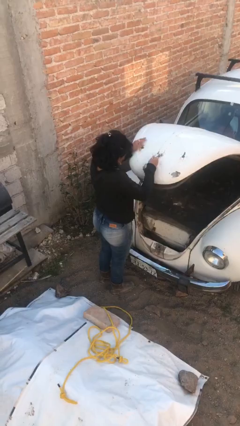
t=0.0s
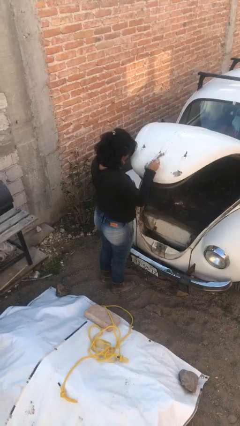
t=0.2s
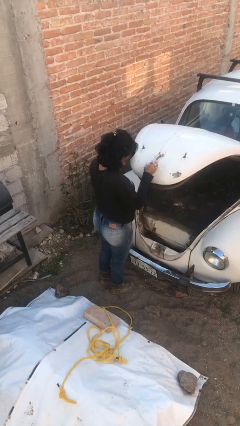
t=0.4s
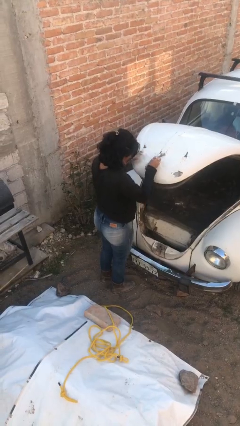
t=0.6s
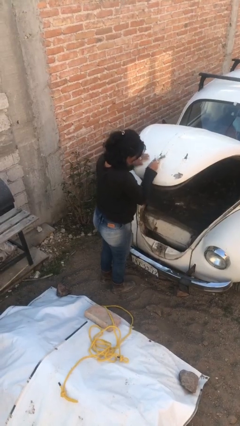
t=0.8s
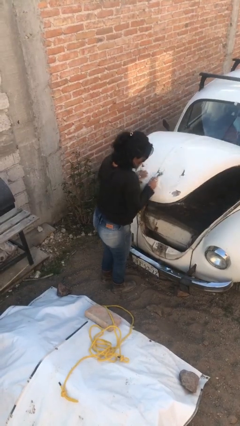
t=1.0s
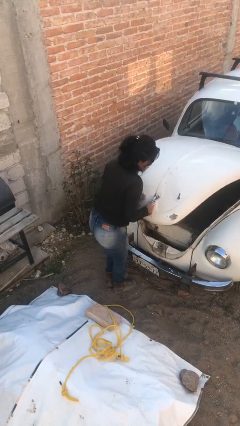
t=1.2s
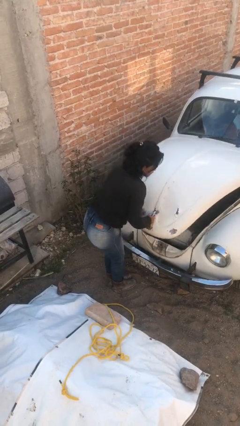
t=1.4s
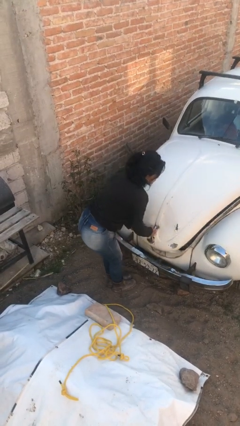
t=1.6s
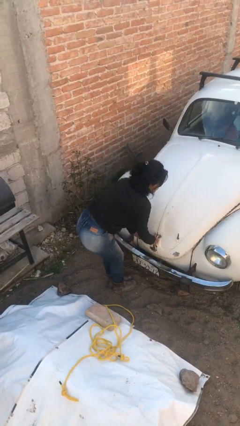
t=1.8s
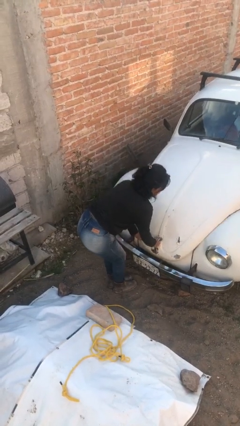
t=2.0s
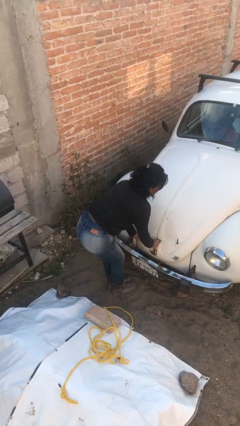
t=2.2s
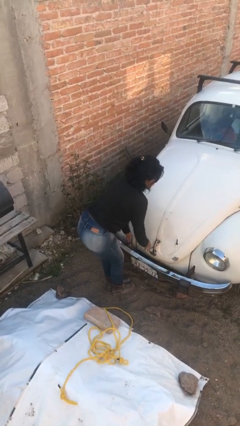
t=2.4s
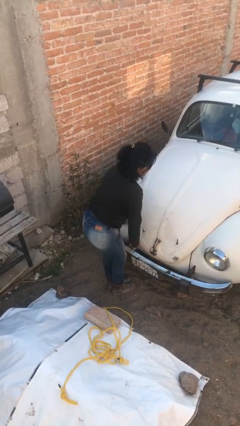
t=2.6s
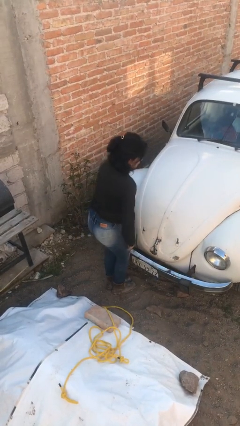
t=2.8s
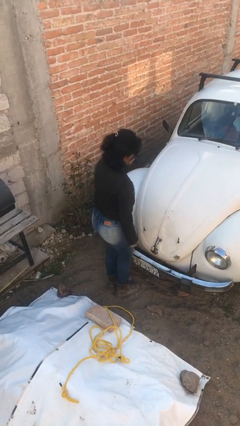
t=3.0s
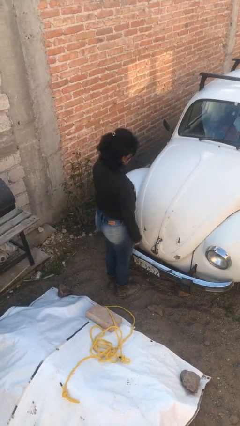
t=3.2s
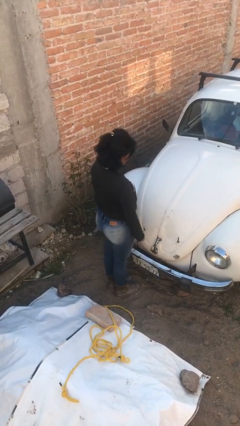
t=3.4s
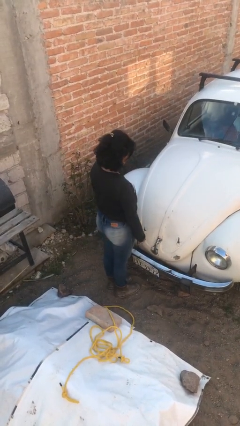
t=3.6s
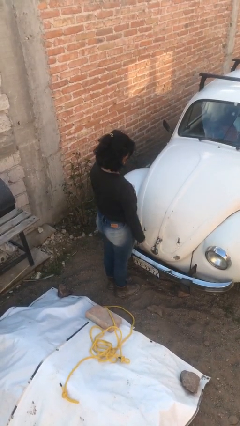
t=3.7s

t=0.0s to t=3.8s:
person closes car trunk

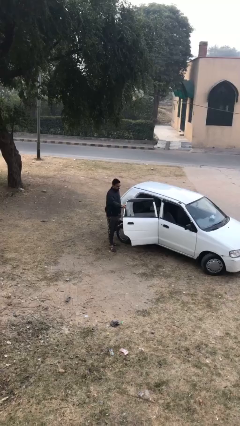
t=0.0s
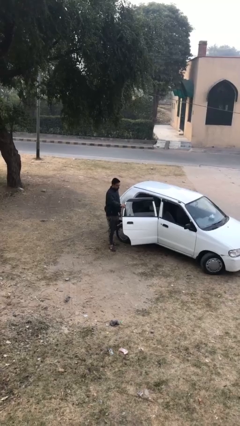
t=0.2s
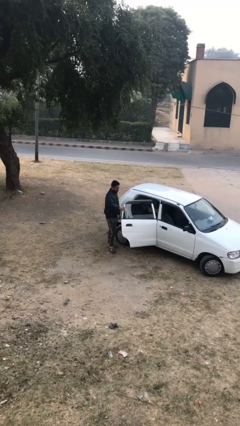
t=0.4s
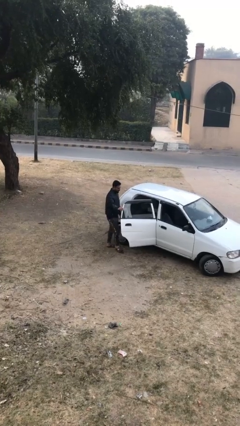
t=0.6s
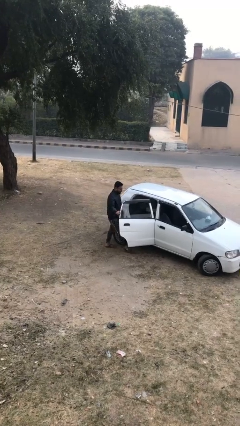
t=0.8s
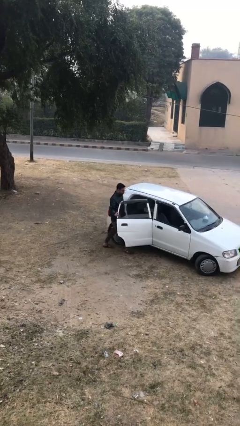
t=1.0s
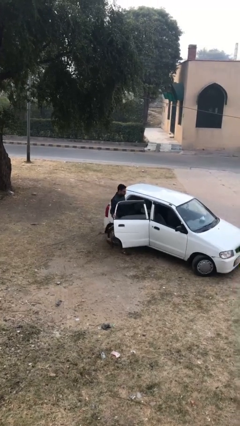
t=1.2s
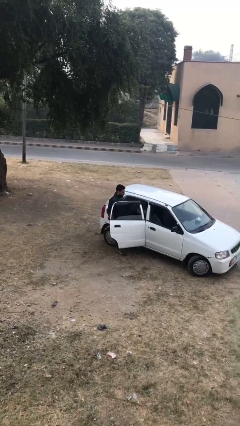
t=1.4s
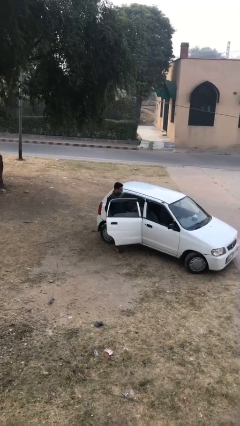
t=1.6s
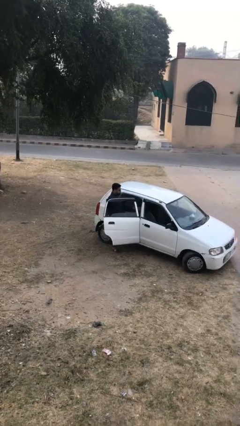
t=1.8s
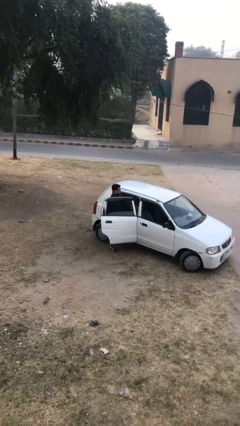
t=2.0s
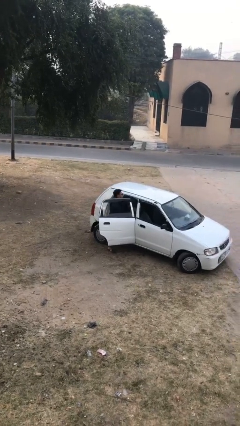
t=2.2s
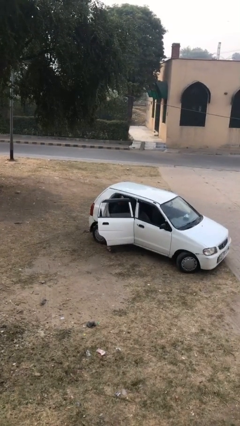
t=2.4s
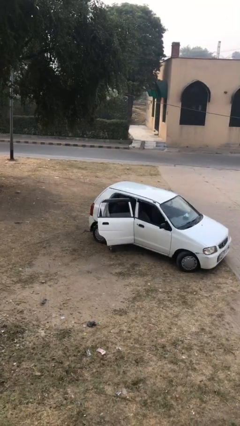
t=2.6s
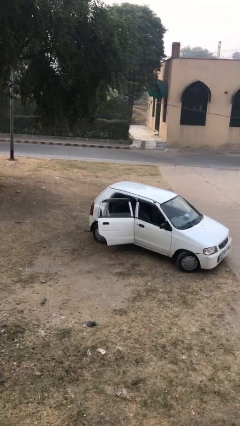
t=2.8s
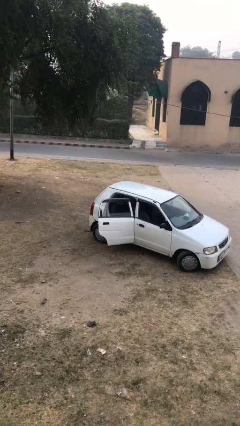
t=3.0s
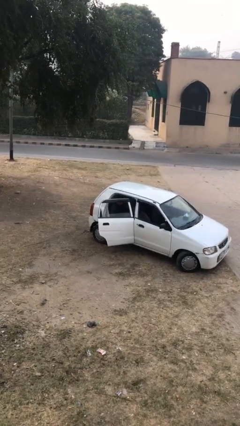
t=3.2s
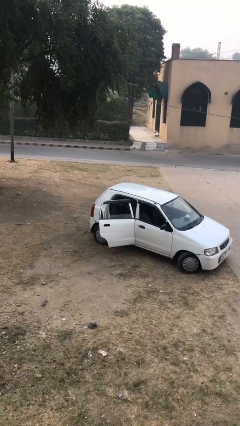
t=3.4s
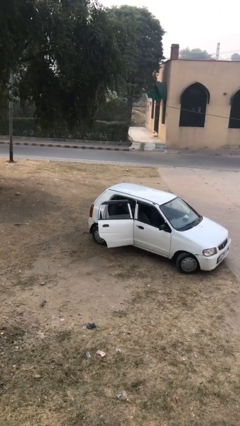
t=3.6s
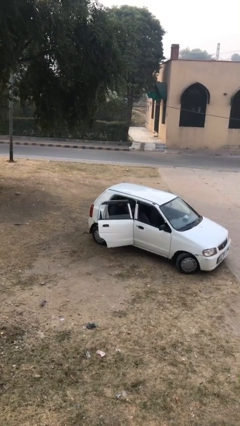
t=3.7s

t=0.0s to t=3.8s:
person enters car

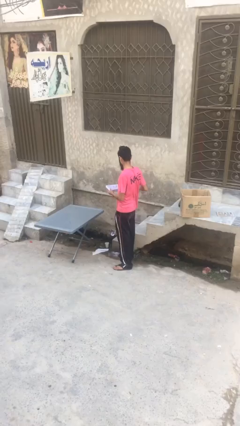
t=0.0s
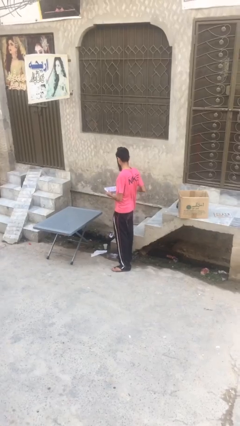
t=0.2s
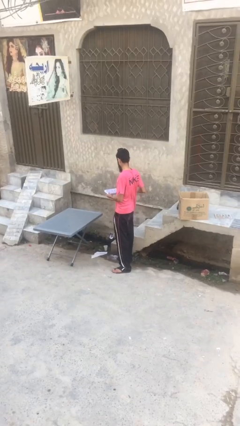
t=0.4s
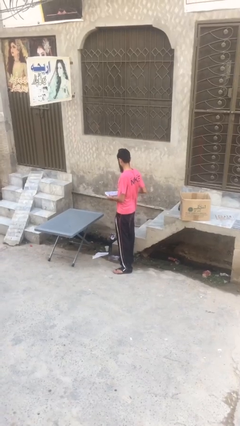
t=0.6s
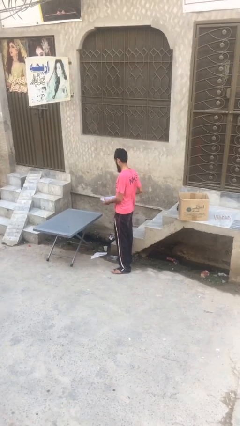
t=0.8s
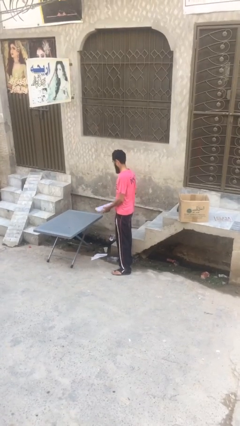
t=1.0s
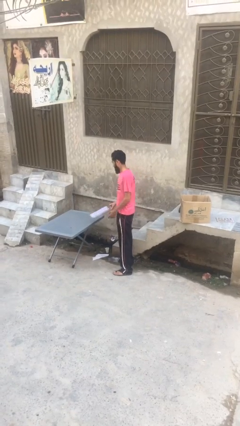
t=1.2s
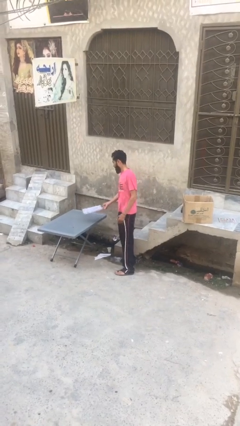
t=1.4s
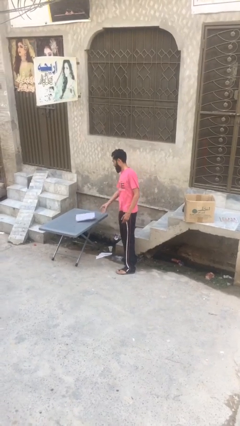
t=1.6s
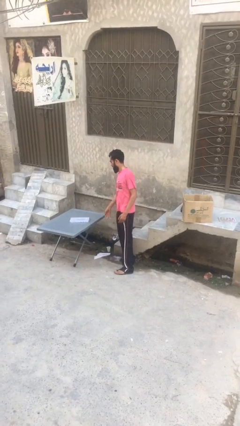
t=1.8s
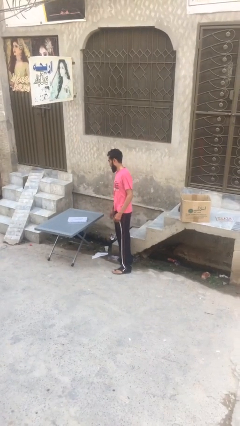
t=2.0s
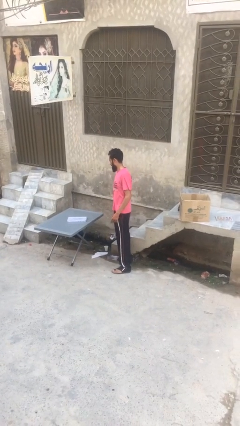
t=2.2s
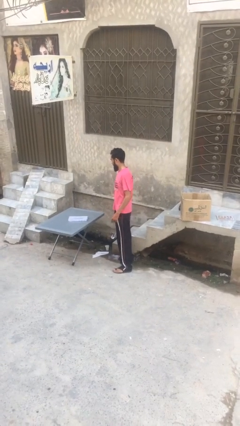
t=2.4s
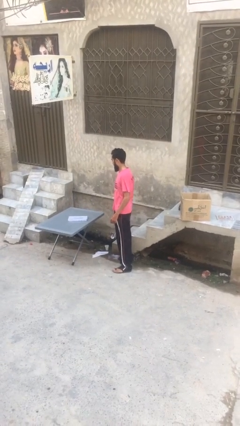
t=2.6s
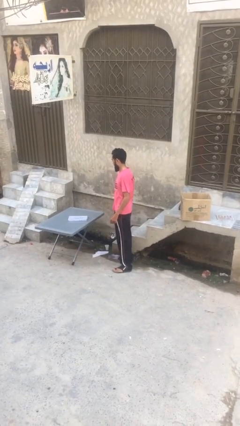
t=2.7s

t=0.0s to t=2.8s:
person puts down object on table

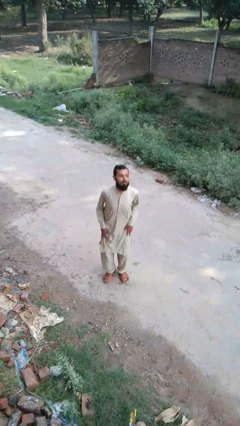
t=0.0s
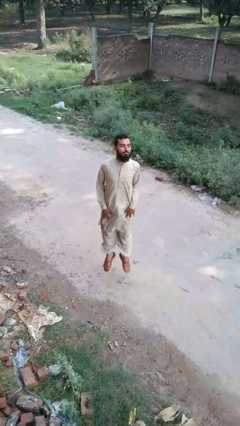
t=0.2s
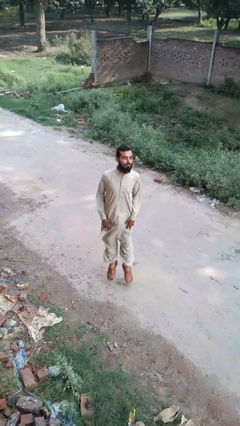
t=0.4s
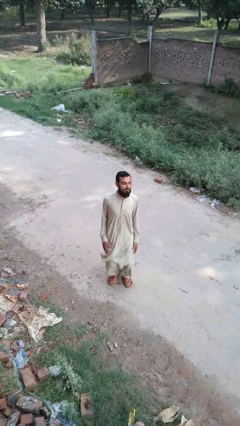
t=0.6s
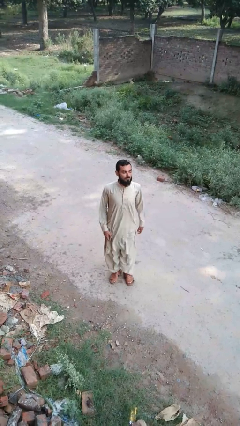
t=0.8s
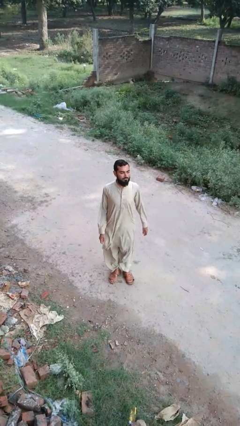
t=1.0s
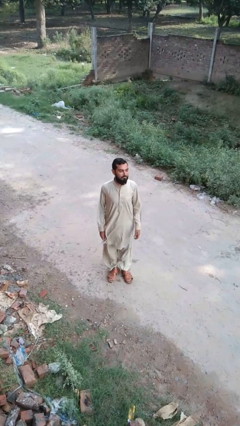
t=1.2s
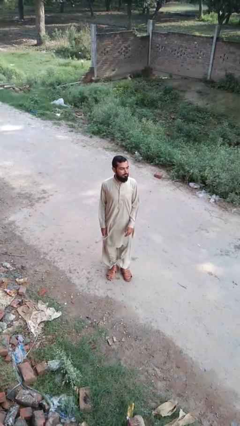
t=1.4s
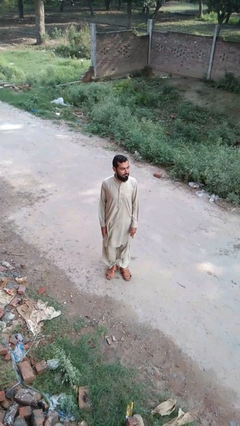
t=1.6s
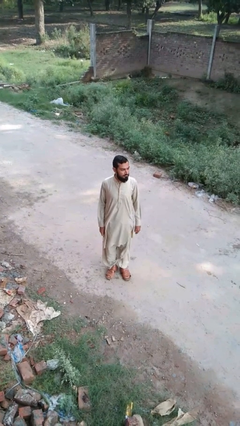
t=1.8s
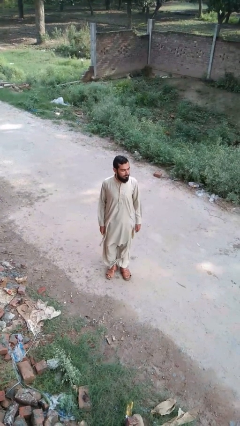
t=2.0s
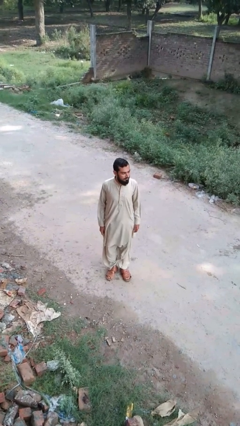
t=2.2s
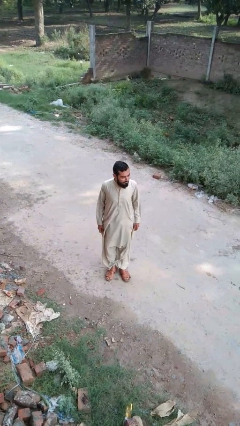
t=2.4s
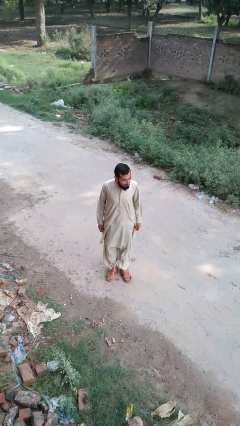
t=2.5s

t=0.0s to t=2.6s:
person jumps

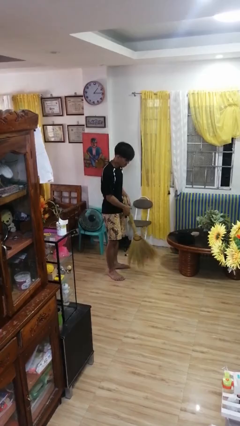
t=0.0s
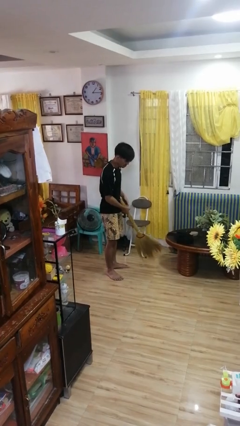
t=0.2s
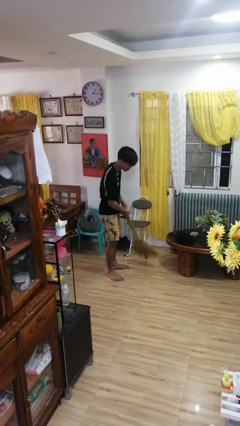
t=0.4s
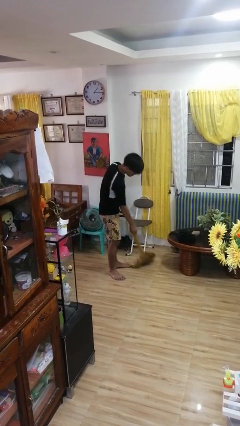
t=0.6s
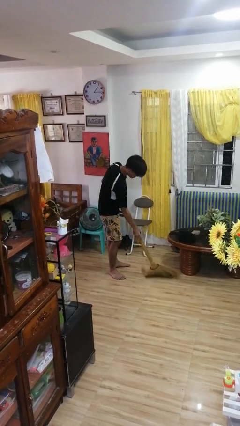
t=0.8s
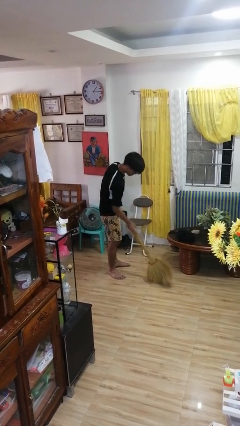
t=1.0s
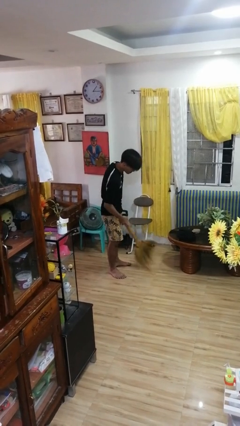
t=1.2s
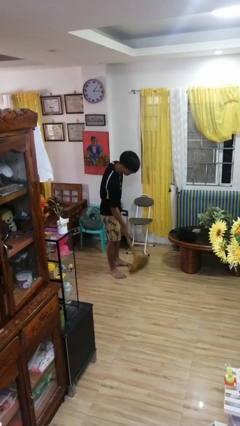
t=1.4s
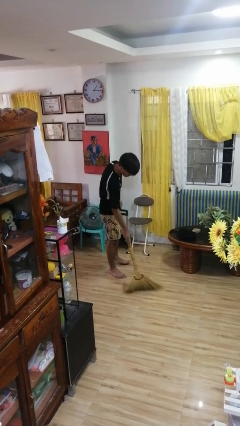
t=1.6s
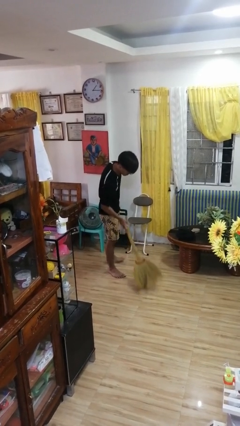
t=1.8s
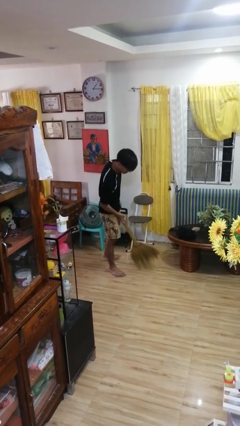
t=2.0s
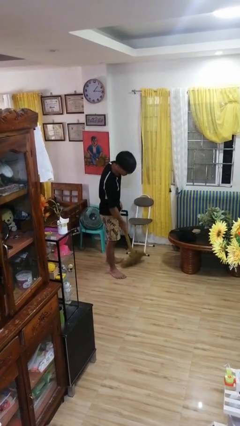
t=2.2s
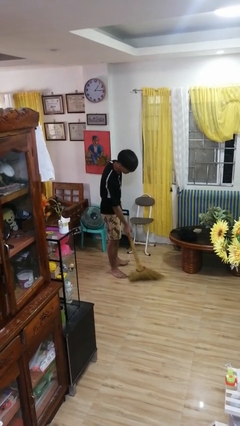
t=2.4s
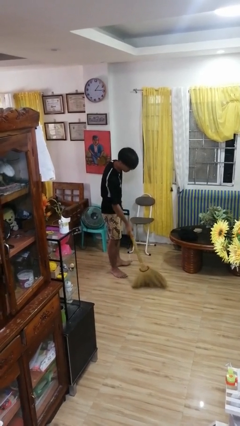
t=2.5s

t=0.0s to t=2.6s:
person sweeps floor

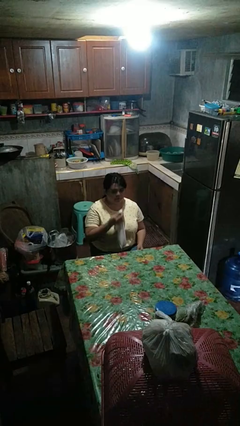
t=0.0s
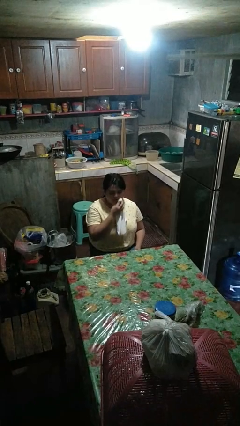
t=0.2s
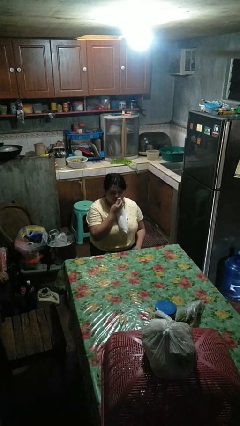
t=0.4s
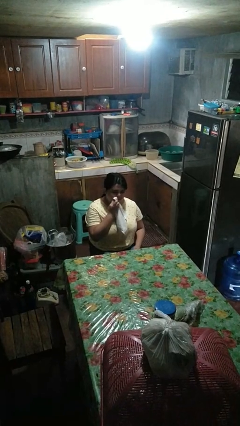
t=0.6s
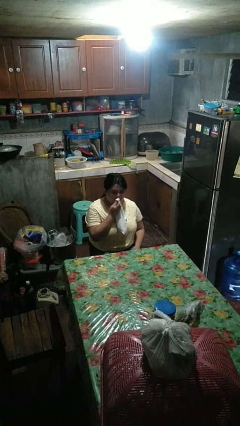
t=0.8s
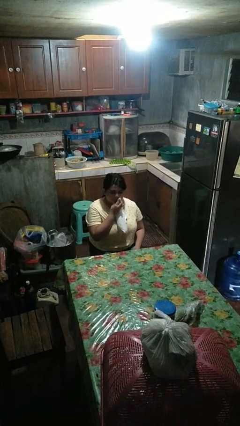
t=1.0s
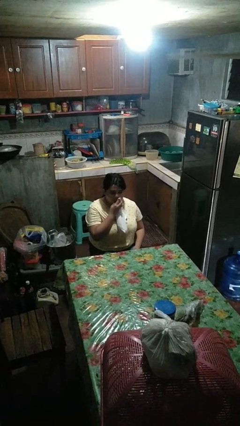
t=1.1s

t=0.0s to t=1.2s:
person wipes mouth with napkin

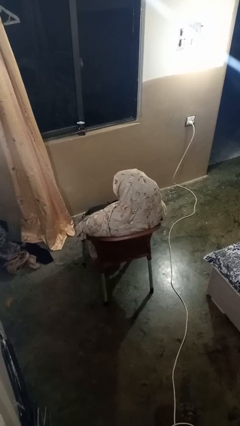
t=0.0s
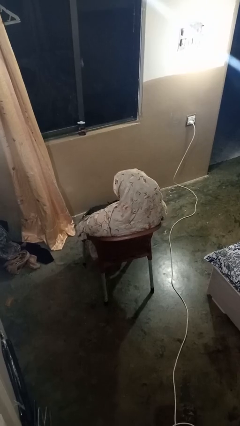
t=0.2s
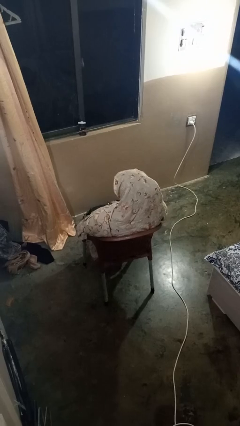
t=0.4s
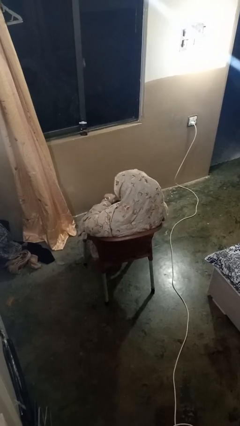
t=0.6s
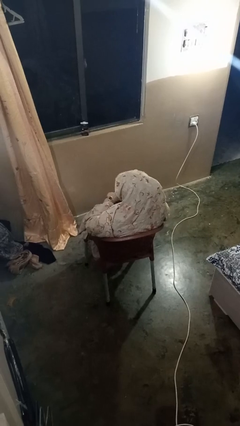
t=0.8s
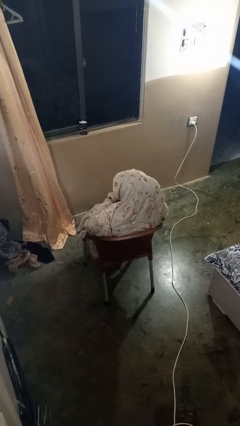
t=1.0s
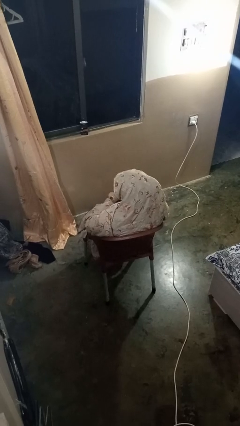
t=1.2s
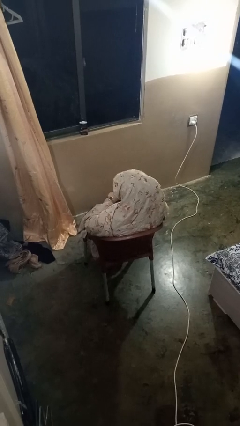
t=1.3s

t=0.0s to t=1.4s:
person looks at wristwatch
